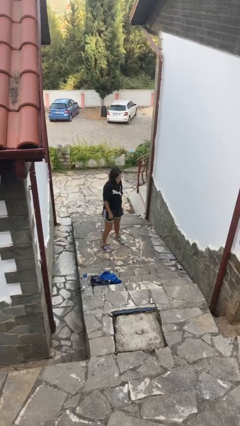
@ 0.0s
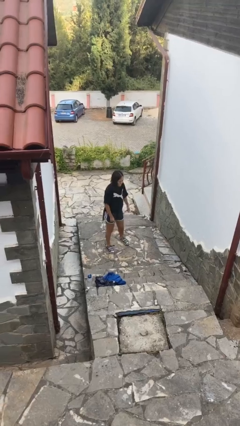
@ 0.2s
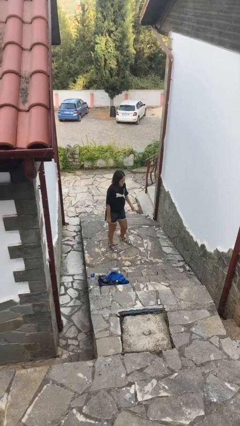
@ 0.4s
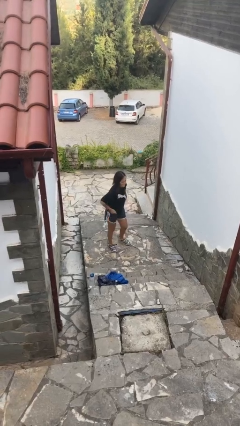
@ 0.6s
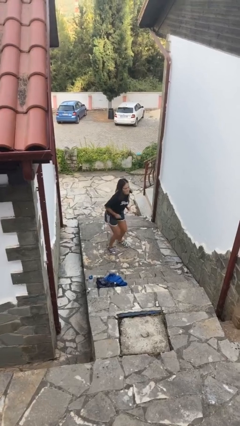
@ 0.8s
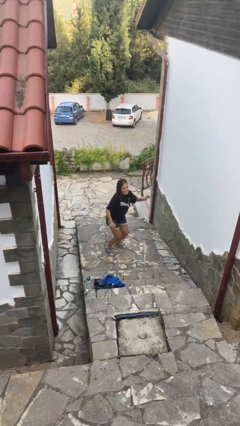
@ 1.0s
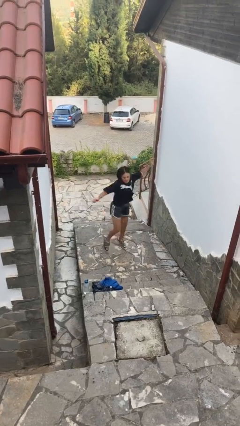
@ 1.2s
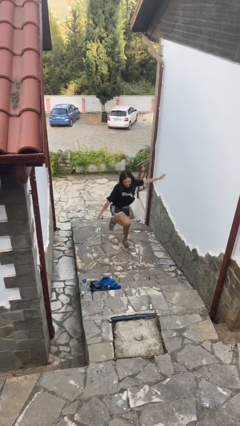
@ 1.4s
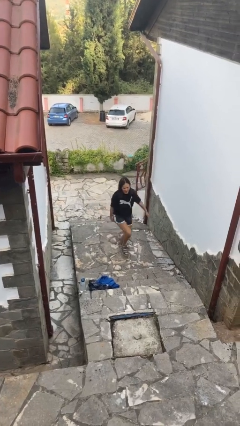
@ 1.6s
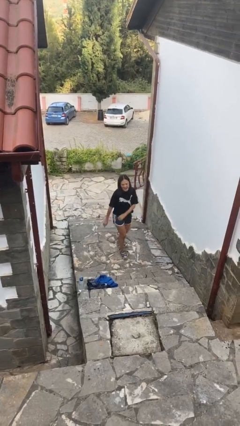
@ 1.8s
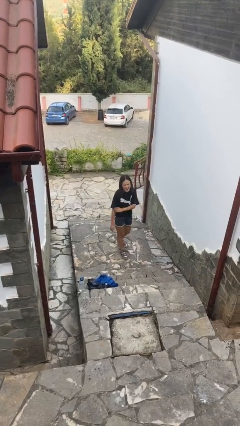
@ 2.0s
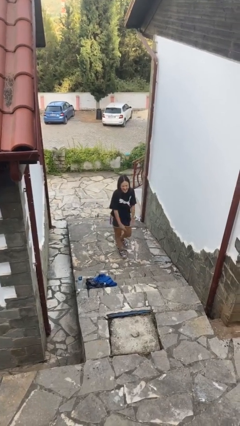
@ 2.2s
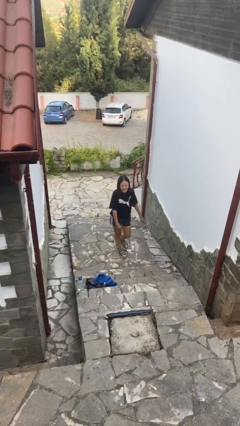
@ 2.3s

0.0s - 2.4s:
person jumps

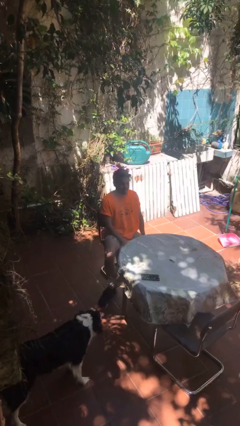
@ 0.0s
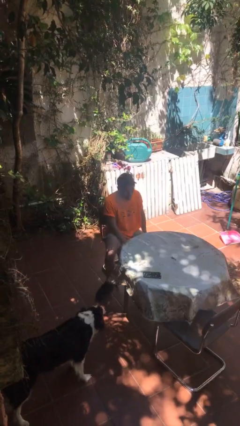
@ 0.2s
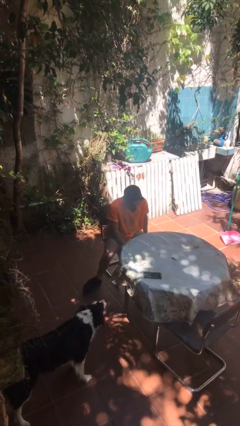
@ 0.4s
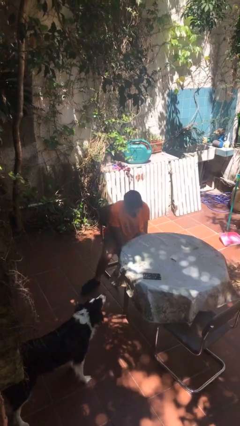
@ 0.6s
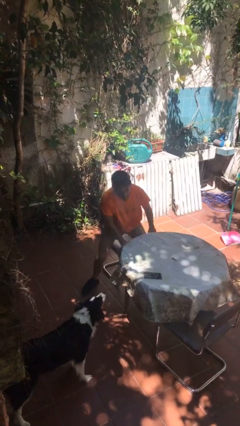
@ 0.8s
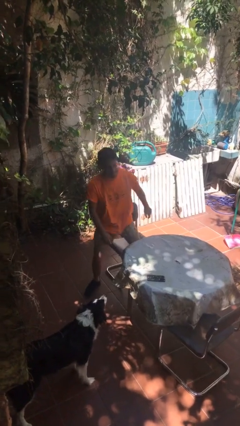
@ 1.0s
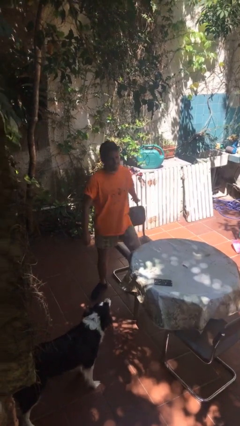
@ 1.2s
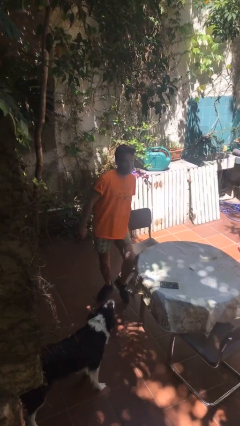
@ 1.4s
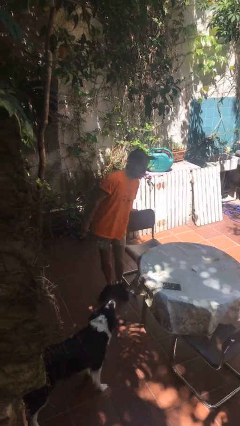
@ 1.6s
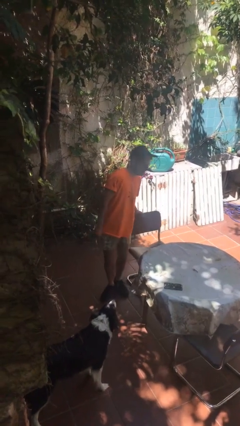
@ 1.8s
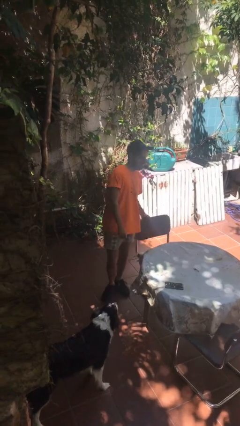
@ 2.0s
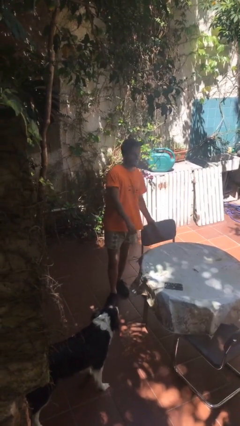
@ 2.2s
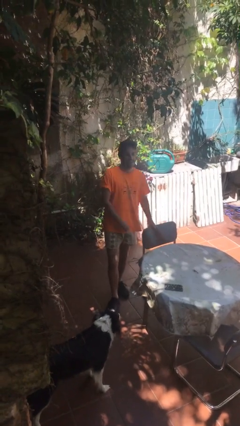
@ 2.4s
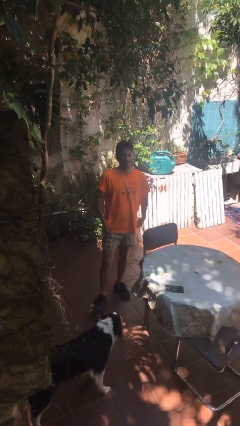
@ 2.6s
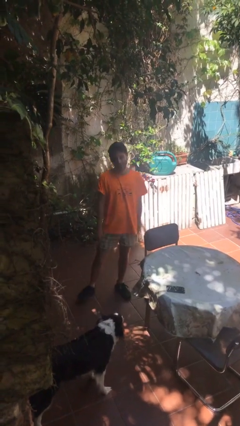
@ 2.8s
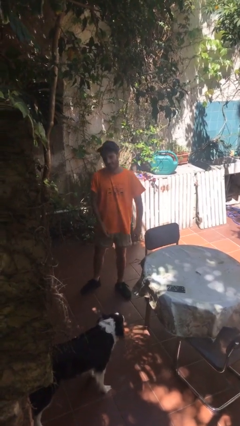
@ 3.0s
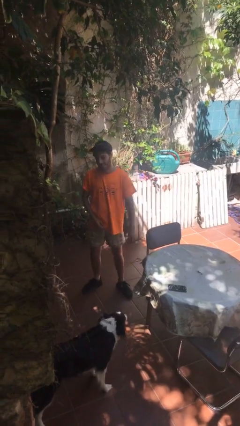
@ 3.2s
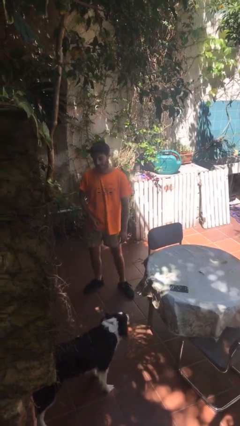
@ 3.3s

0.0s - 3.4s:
person stands up

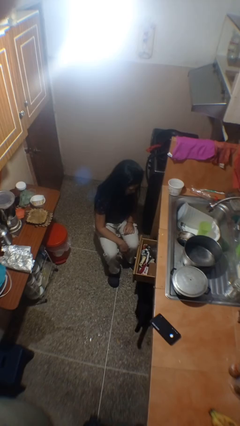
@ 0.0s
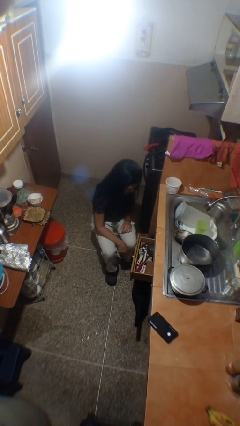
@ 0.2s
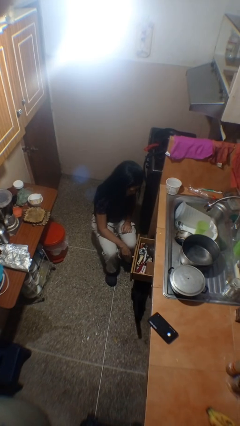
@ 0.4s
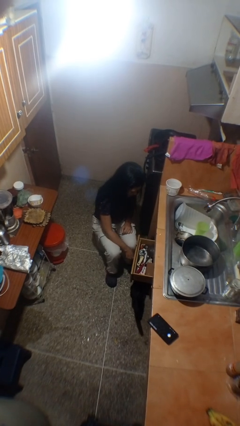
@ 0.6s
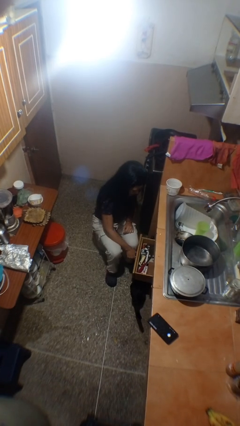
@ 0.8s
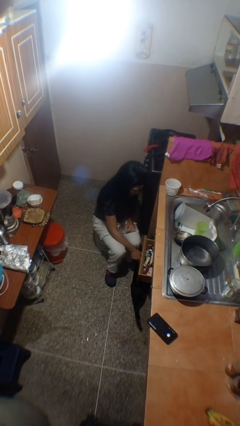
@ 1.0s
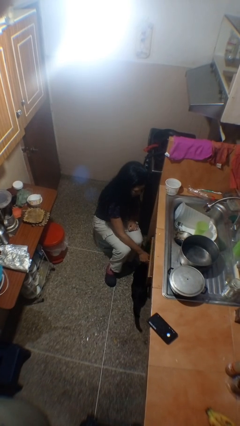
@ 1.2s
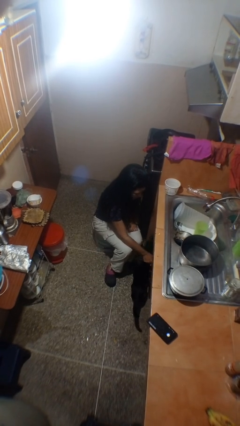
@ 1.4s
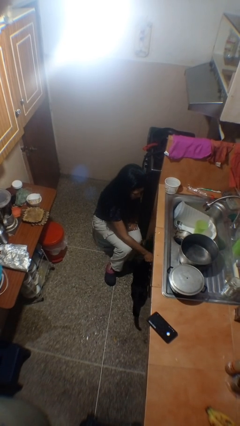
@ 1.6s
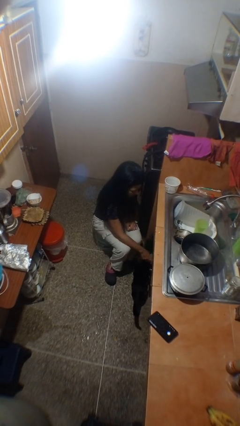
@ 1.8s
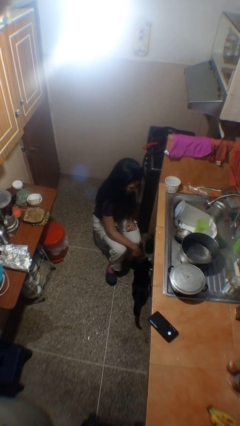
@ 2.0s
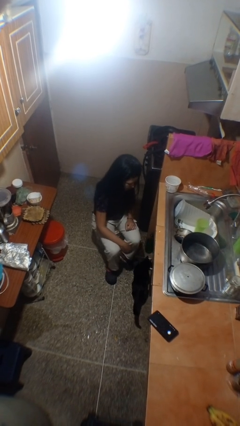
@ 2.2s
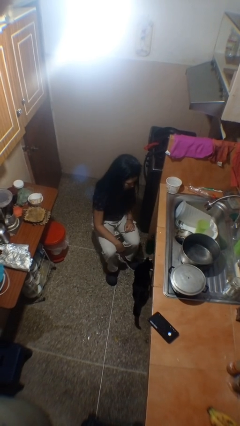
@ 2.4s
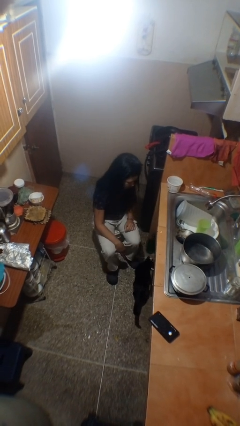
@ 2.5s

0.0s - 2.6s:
person closes kitchen drawer

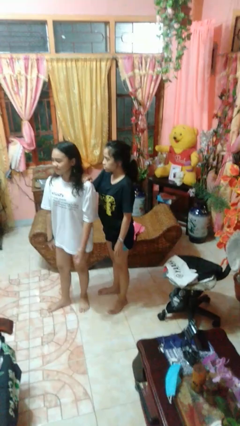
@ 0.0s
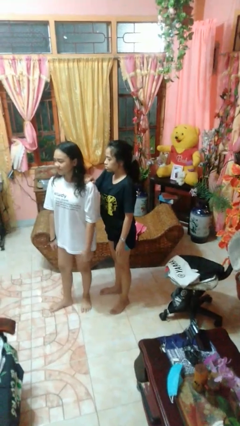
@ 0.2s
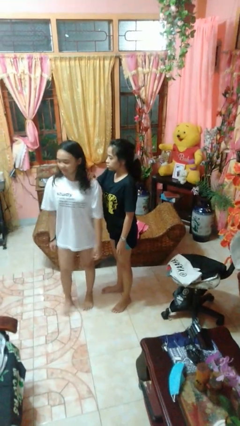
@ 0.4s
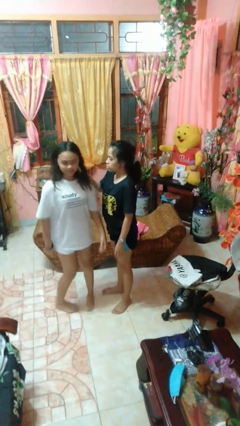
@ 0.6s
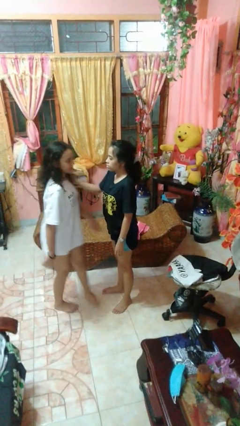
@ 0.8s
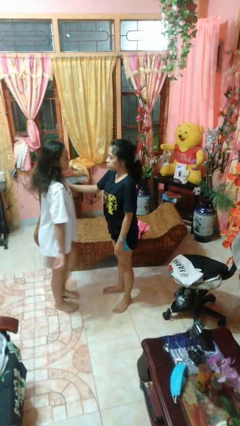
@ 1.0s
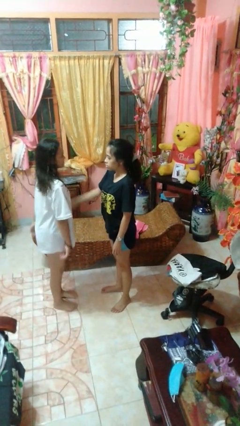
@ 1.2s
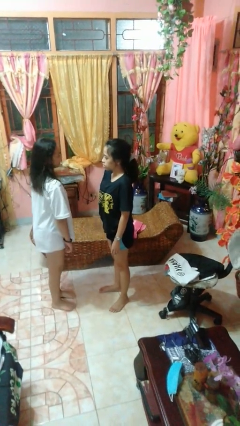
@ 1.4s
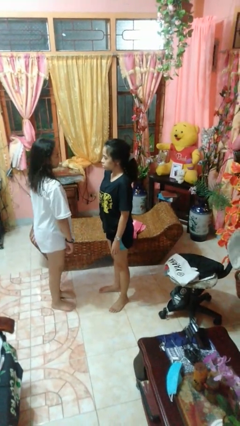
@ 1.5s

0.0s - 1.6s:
person spins person around

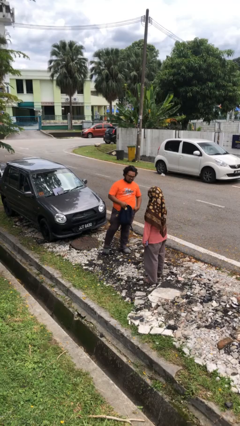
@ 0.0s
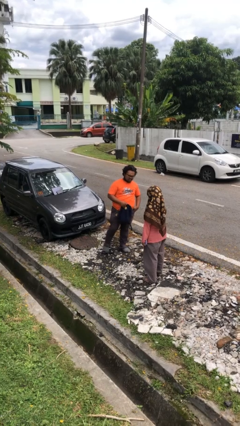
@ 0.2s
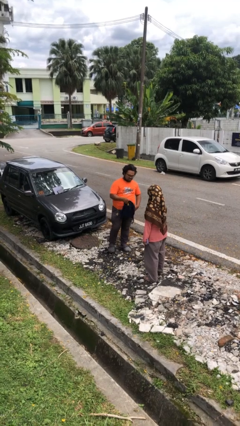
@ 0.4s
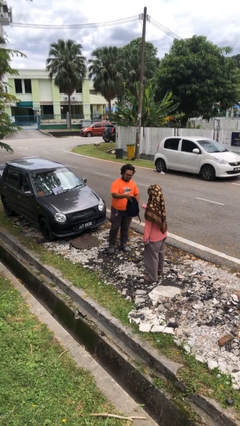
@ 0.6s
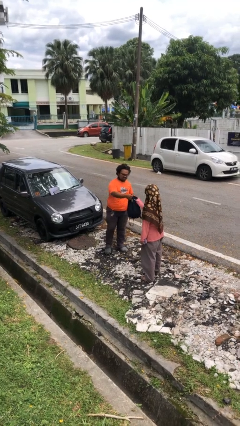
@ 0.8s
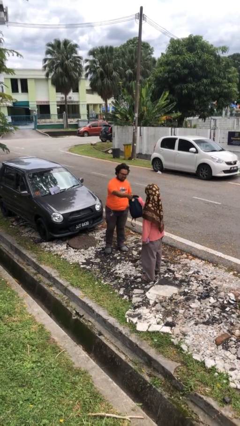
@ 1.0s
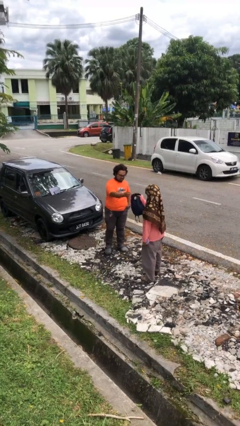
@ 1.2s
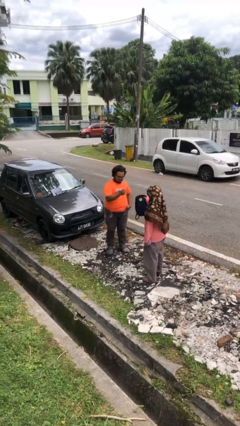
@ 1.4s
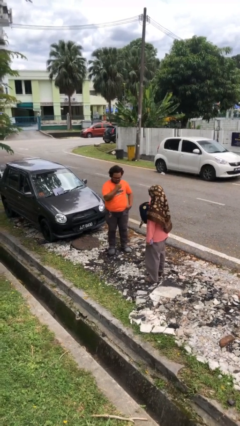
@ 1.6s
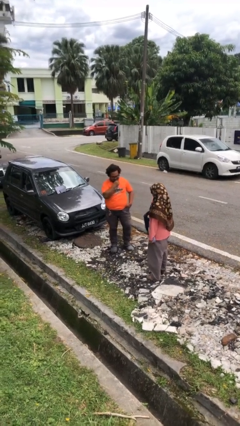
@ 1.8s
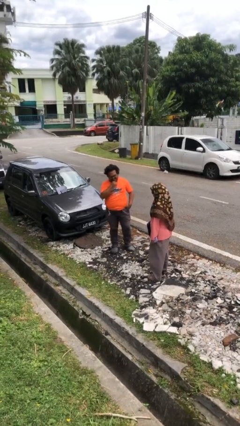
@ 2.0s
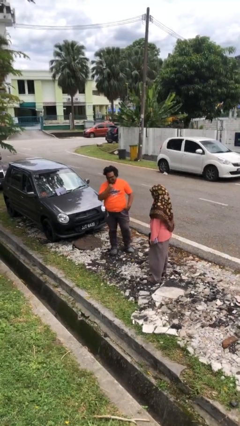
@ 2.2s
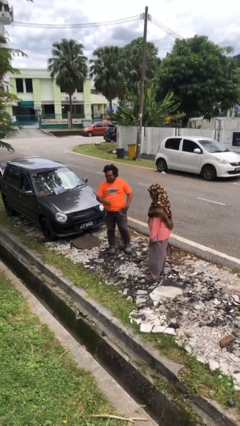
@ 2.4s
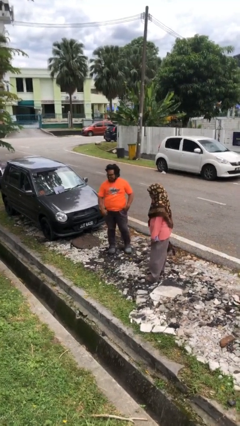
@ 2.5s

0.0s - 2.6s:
person transfers object to person

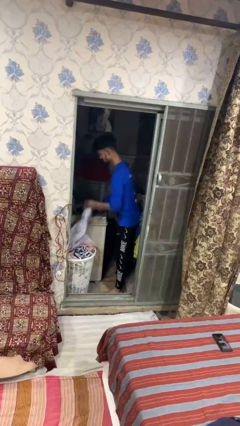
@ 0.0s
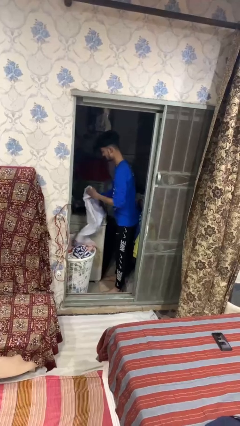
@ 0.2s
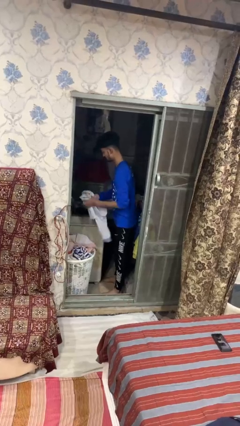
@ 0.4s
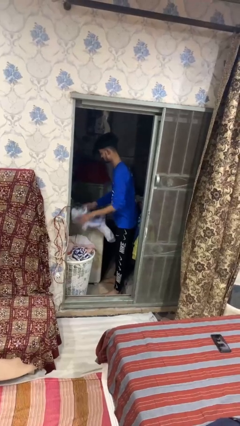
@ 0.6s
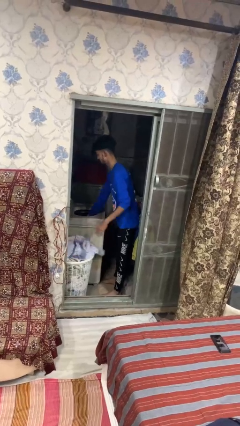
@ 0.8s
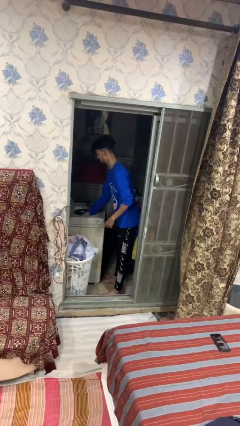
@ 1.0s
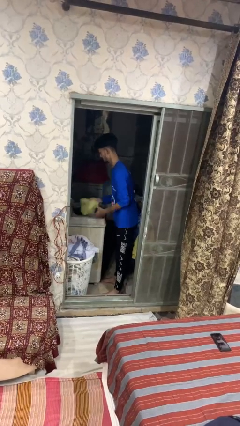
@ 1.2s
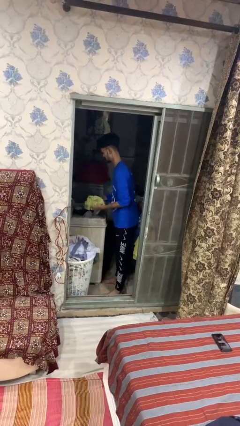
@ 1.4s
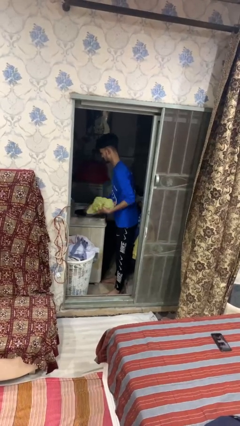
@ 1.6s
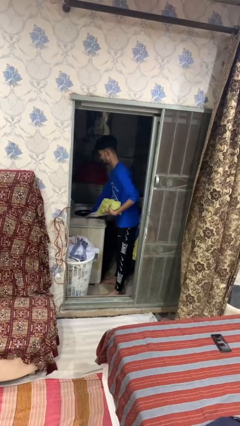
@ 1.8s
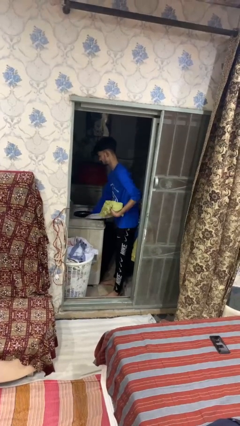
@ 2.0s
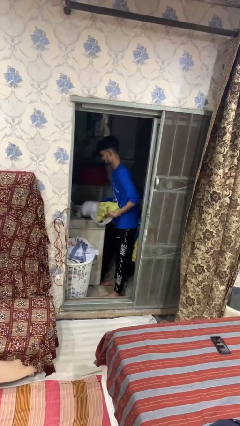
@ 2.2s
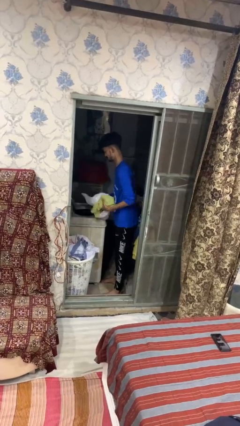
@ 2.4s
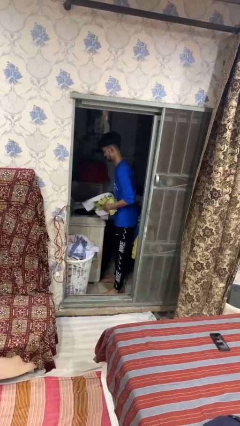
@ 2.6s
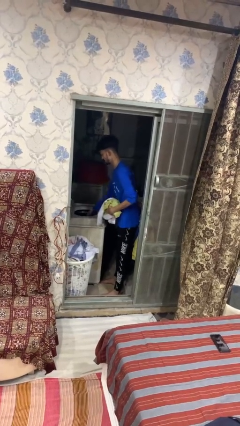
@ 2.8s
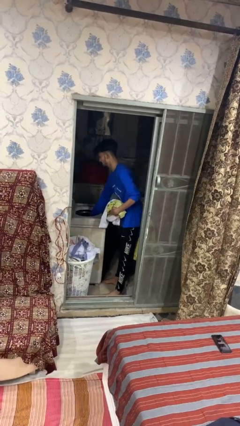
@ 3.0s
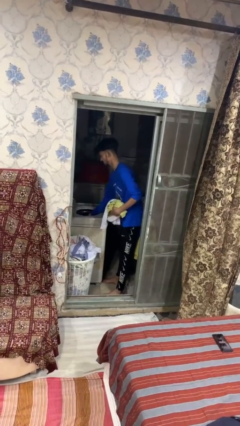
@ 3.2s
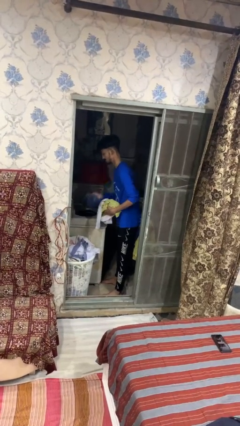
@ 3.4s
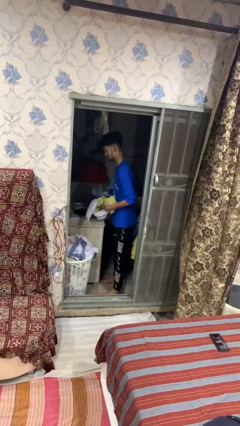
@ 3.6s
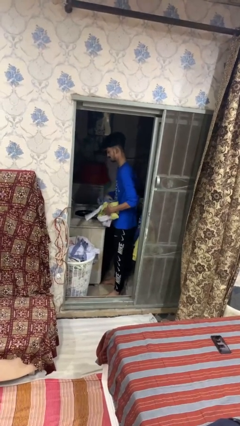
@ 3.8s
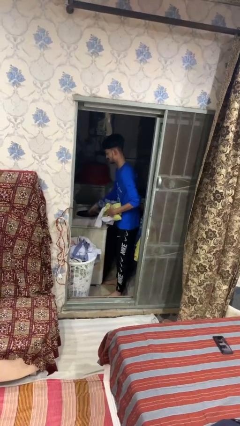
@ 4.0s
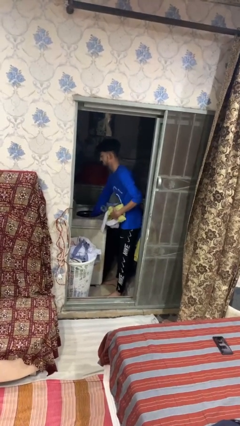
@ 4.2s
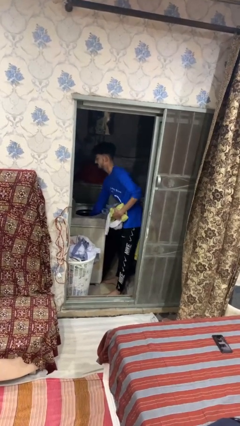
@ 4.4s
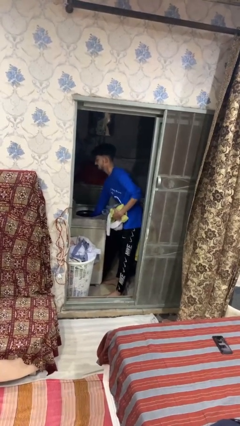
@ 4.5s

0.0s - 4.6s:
person unloads dryer

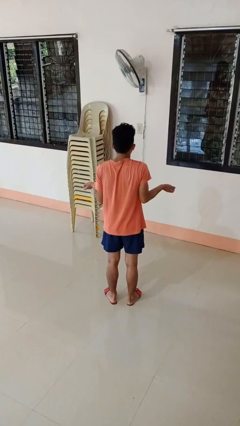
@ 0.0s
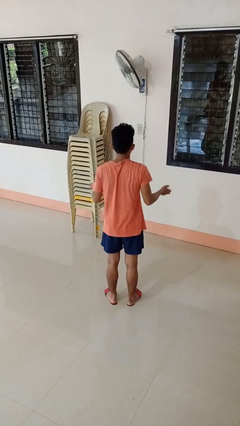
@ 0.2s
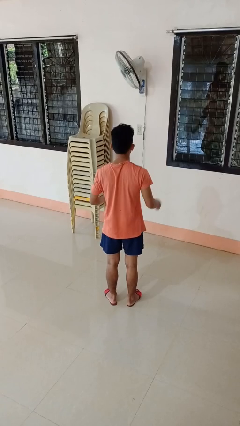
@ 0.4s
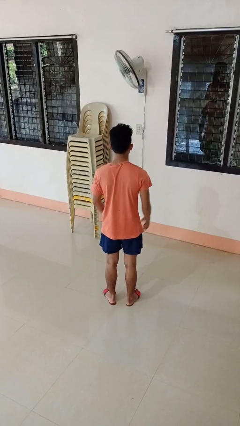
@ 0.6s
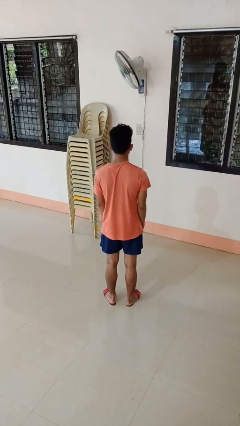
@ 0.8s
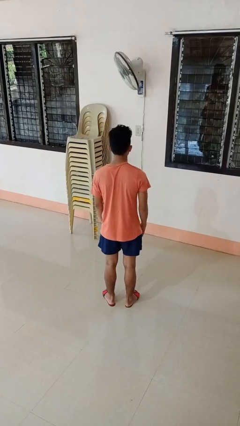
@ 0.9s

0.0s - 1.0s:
person shrugs
